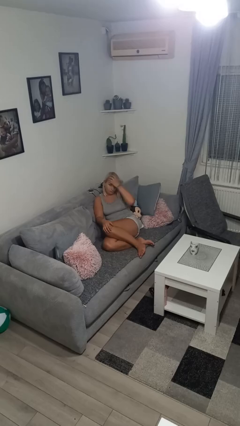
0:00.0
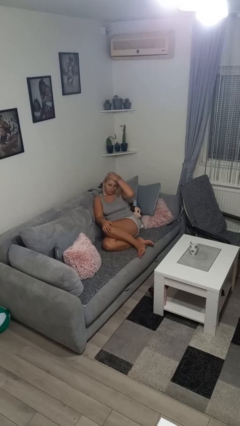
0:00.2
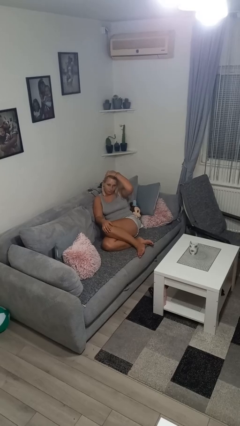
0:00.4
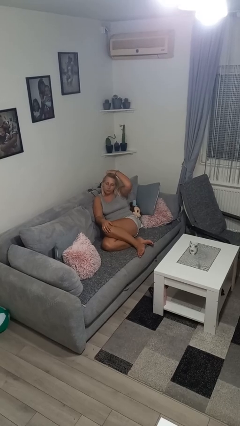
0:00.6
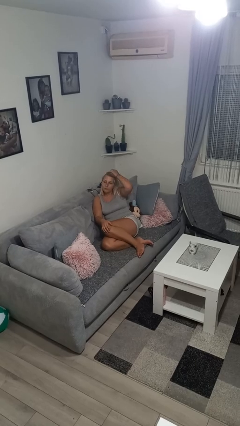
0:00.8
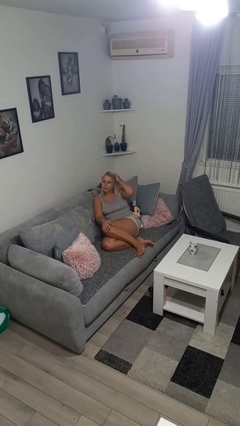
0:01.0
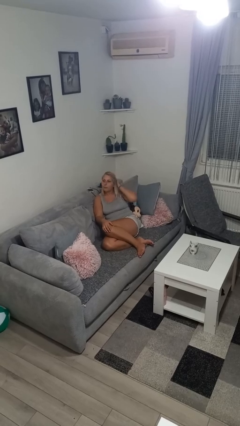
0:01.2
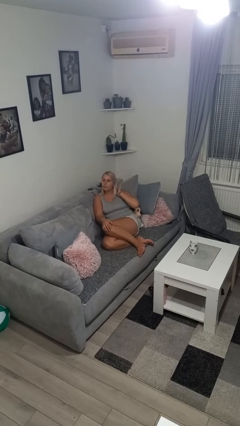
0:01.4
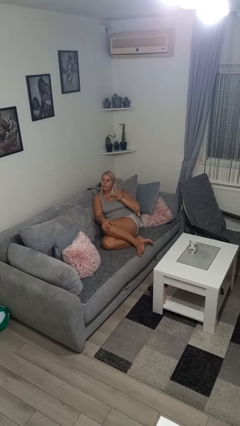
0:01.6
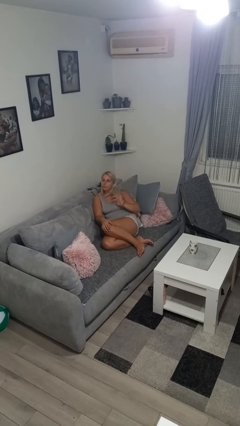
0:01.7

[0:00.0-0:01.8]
person strokes hair

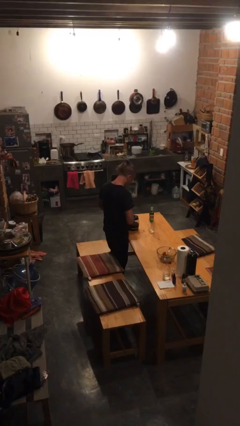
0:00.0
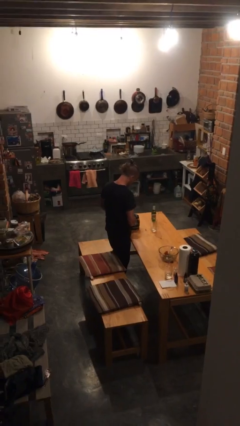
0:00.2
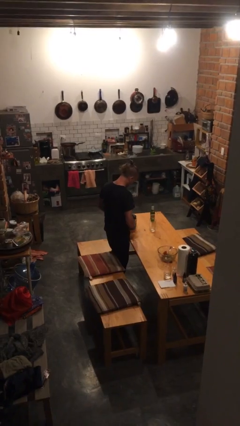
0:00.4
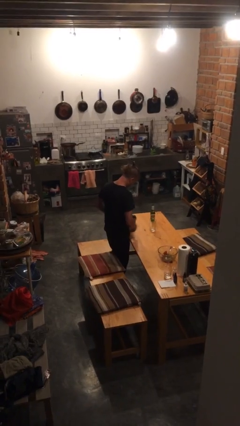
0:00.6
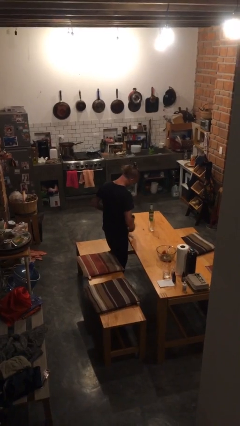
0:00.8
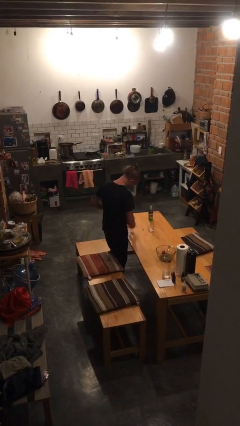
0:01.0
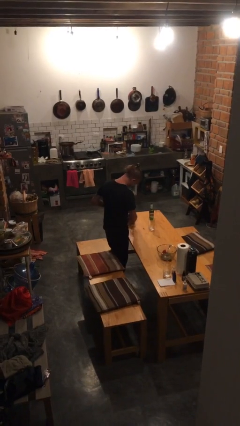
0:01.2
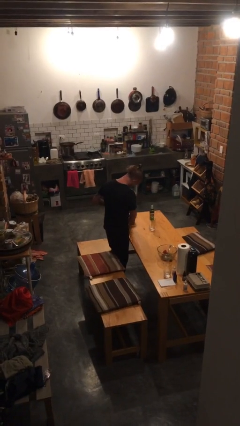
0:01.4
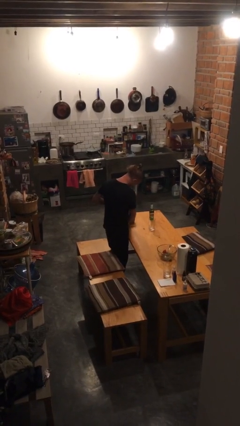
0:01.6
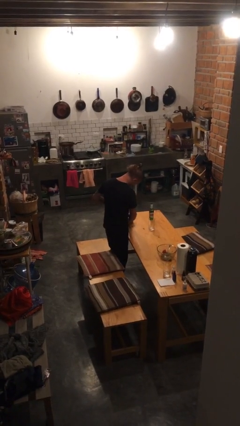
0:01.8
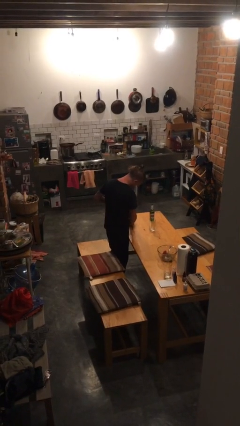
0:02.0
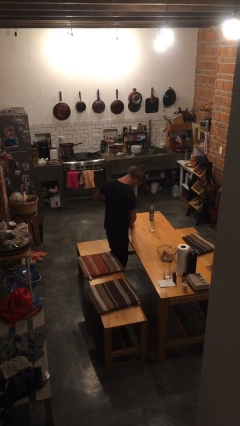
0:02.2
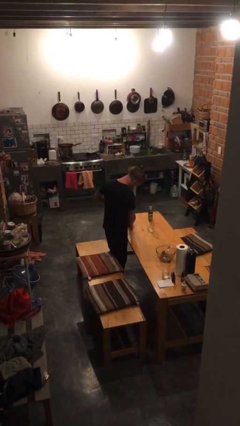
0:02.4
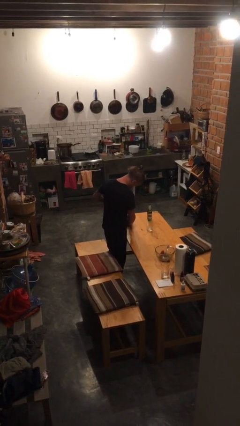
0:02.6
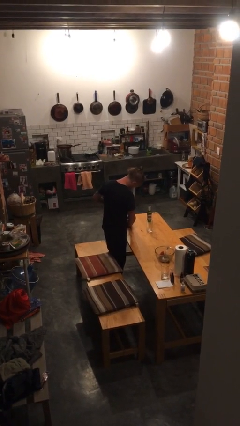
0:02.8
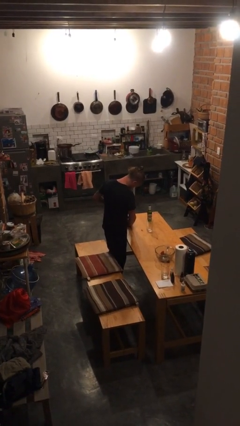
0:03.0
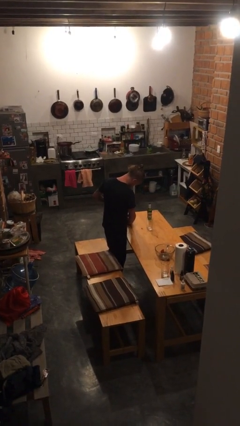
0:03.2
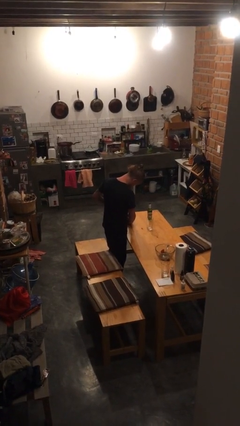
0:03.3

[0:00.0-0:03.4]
person pours coffee into mug

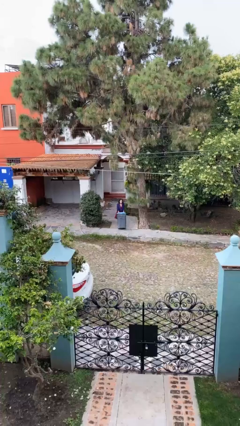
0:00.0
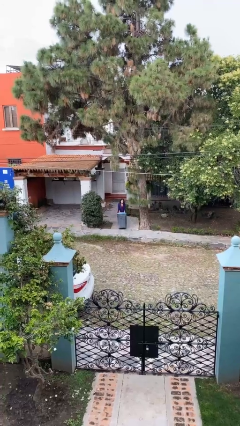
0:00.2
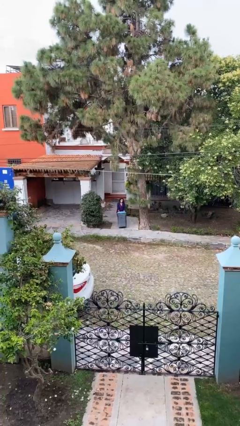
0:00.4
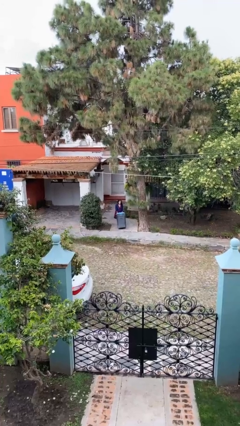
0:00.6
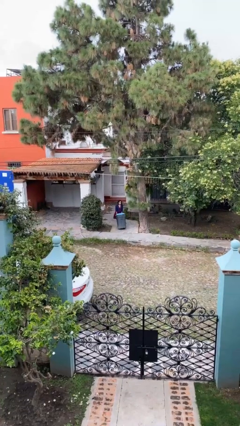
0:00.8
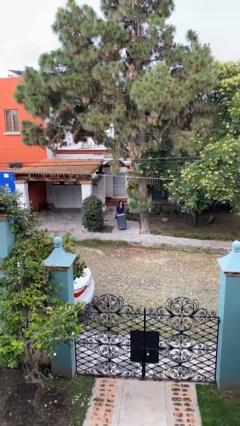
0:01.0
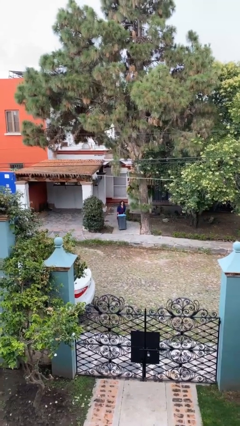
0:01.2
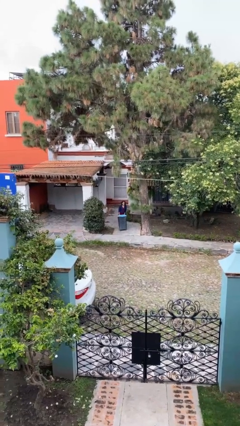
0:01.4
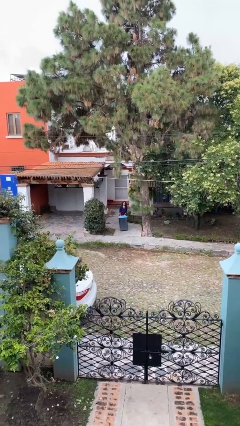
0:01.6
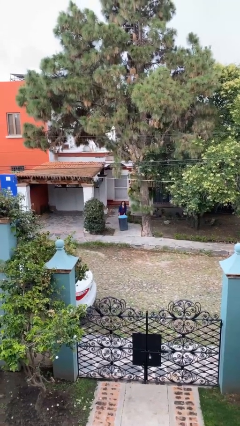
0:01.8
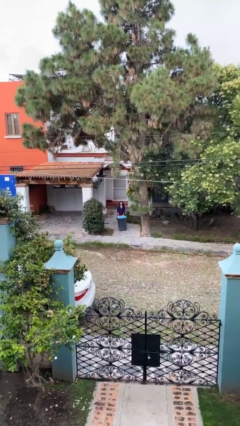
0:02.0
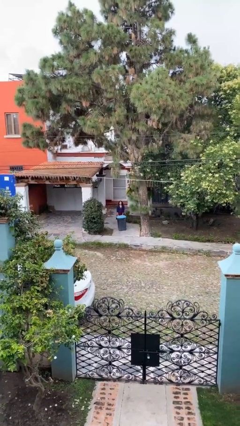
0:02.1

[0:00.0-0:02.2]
person pulls wheeled trashcan

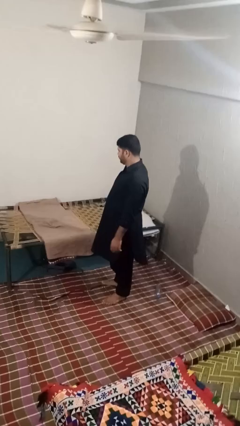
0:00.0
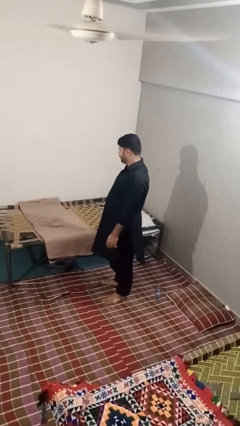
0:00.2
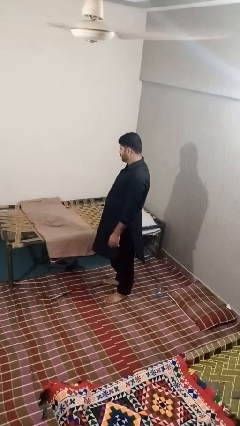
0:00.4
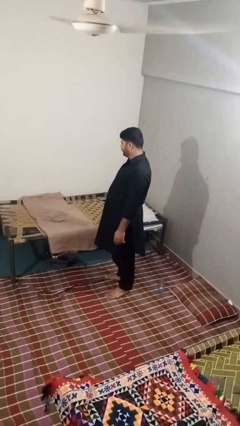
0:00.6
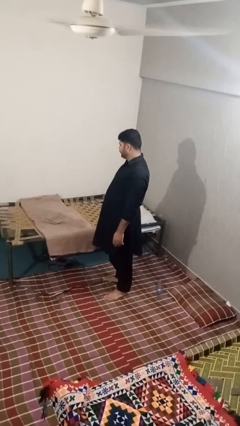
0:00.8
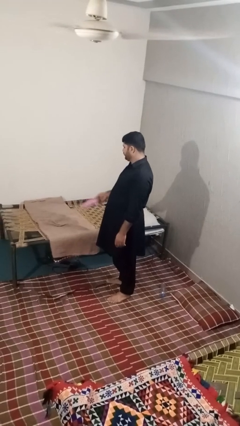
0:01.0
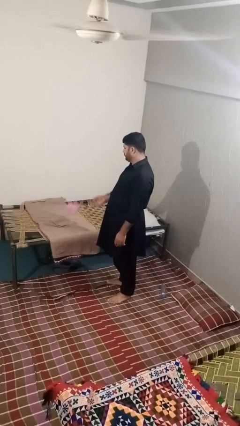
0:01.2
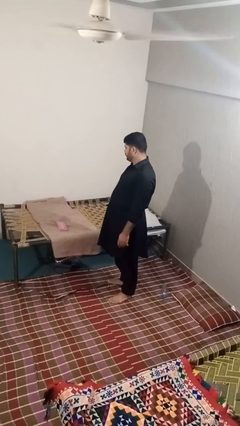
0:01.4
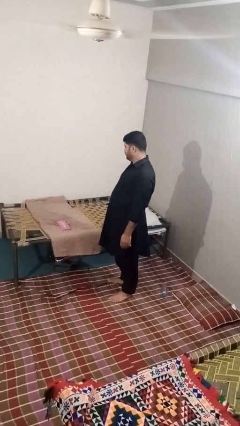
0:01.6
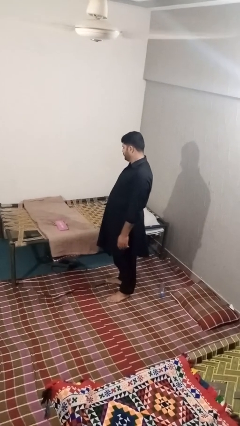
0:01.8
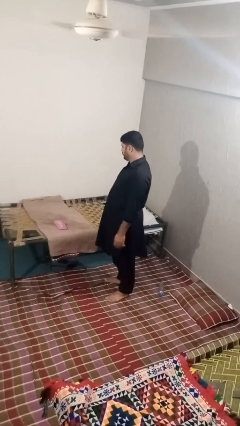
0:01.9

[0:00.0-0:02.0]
person puts down object on bed

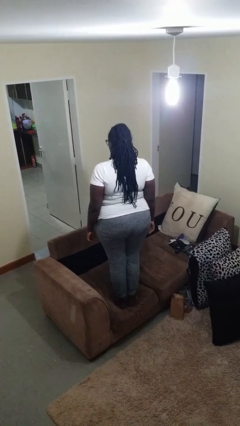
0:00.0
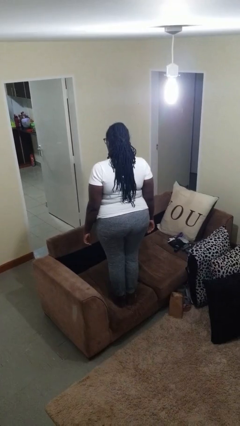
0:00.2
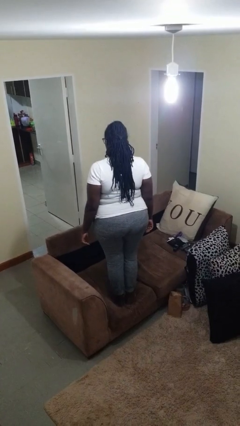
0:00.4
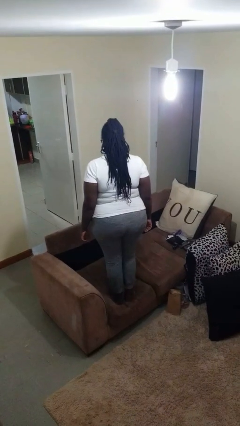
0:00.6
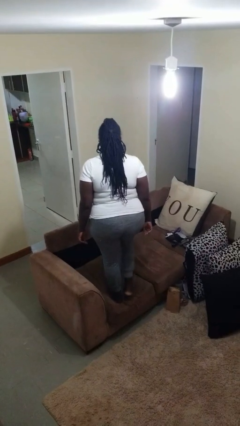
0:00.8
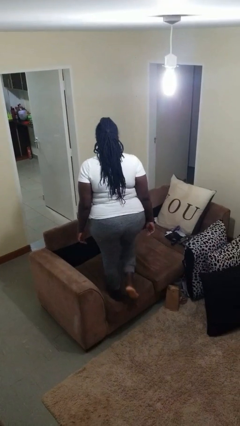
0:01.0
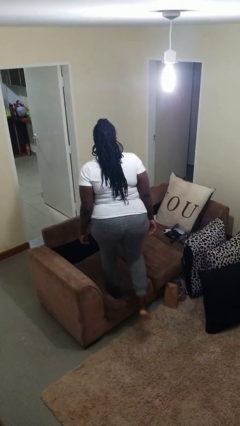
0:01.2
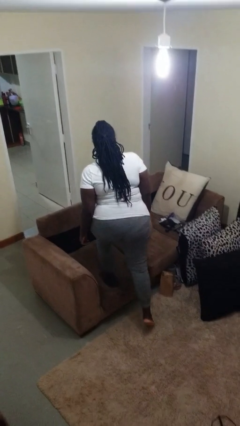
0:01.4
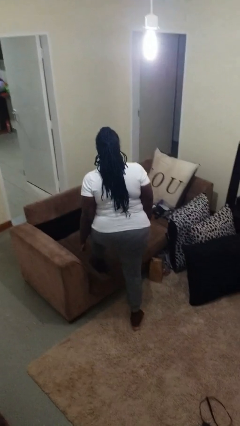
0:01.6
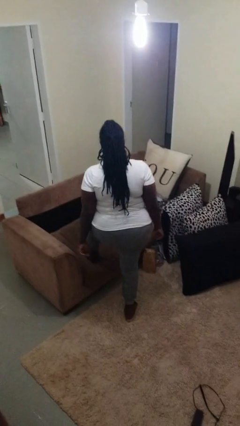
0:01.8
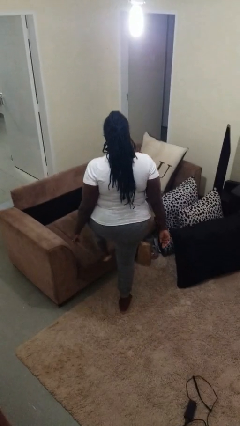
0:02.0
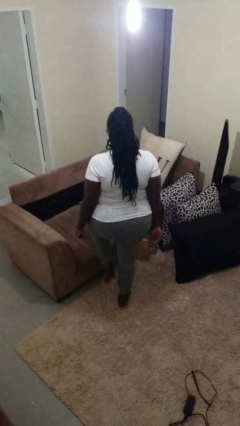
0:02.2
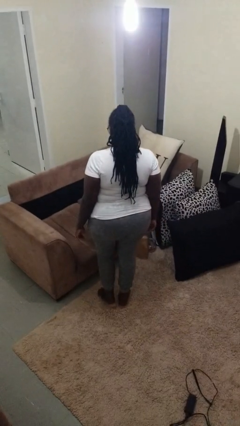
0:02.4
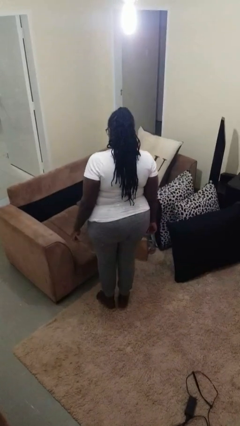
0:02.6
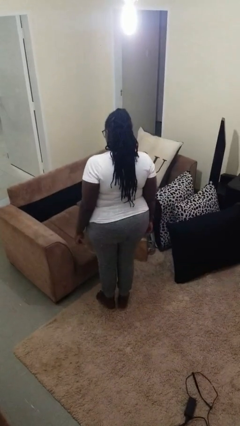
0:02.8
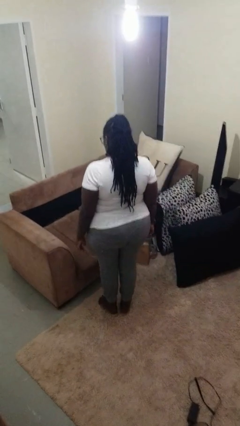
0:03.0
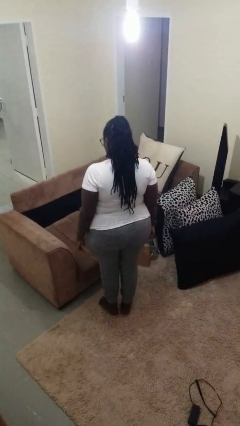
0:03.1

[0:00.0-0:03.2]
person climbs off couch

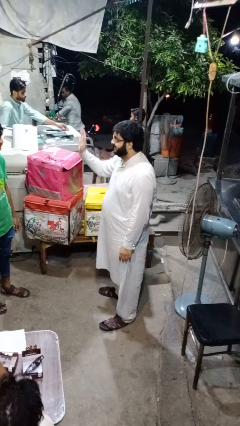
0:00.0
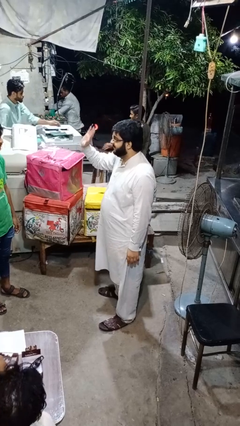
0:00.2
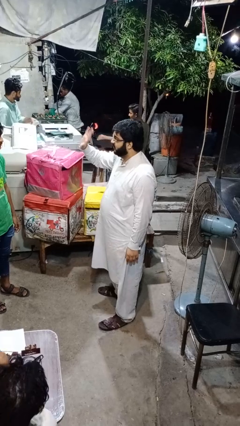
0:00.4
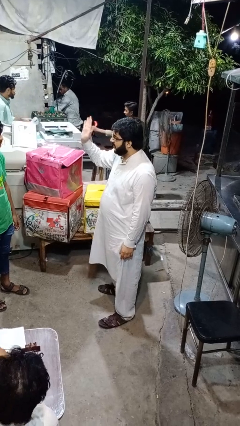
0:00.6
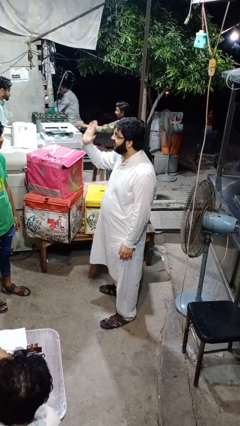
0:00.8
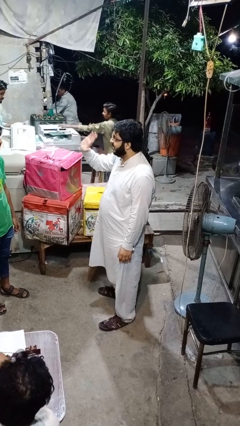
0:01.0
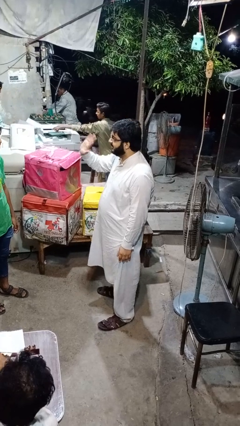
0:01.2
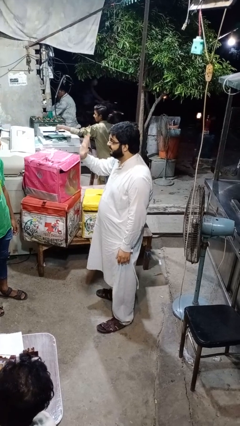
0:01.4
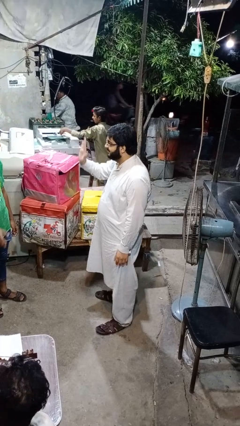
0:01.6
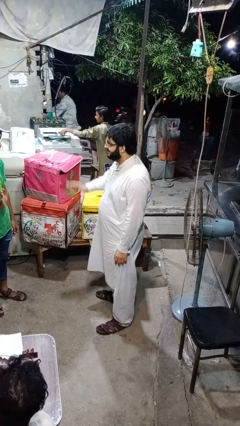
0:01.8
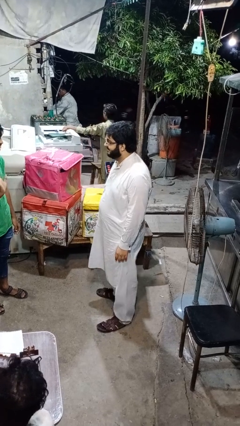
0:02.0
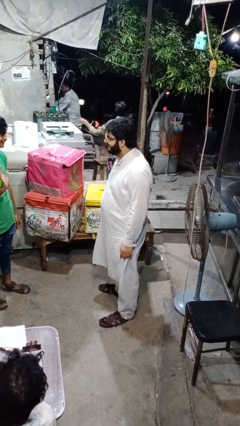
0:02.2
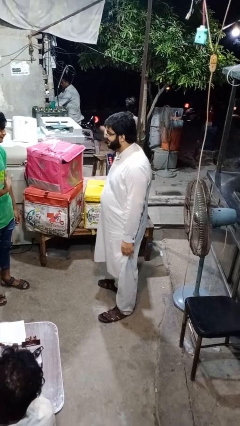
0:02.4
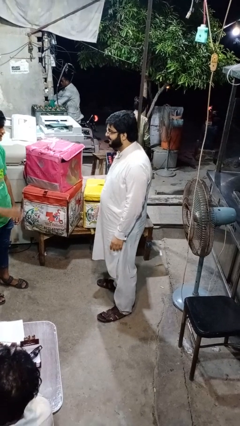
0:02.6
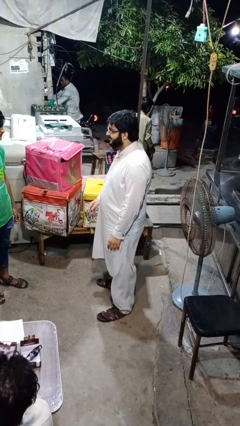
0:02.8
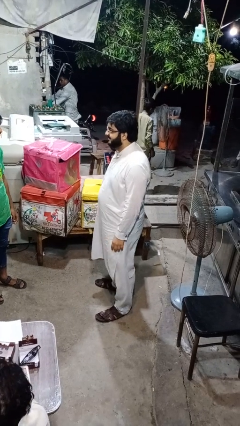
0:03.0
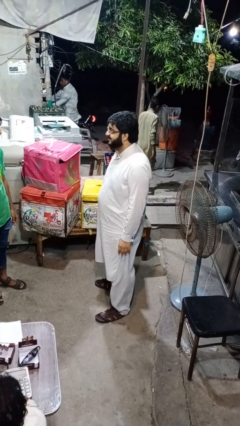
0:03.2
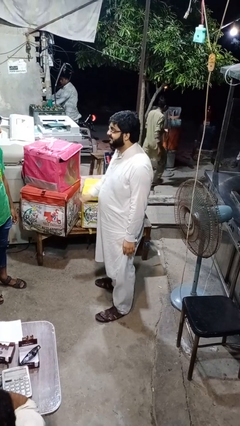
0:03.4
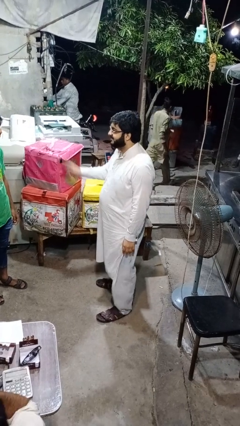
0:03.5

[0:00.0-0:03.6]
person waves at person

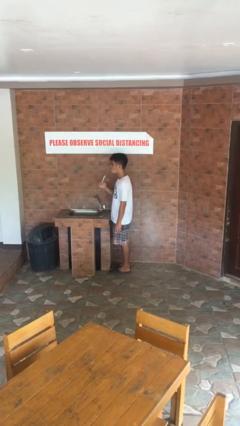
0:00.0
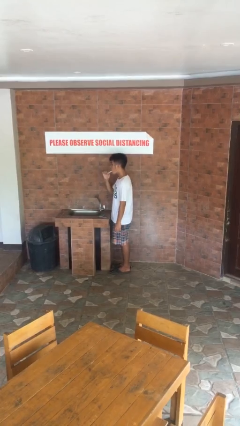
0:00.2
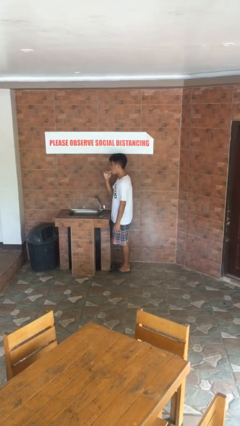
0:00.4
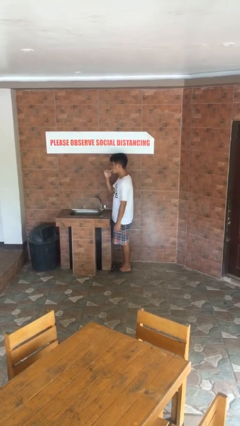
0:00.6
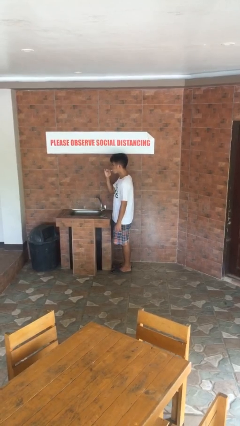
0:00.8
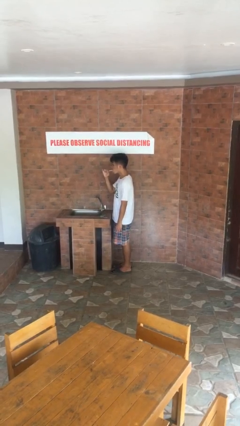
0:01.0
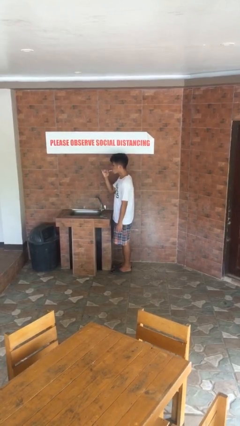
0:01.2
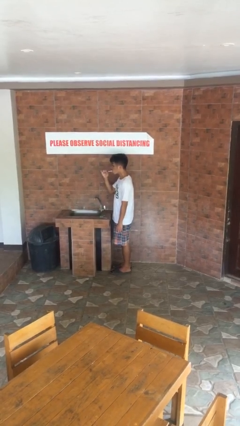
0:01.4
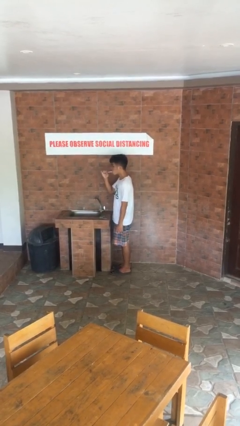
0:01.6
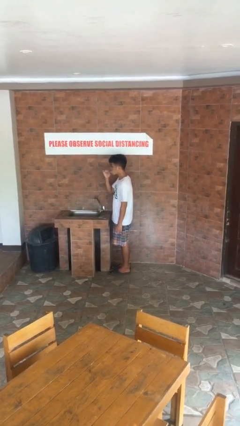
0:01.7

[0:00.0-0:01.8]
person brushes teeth
